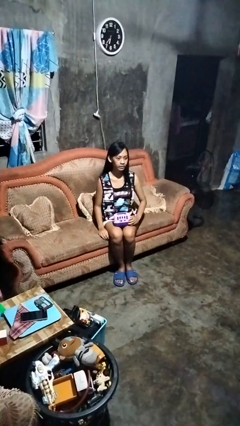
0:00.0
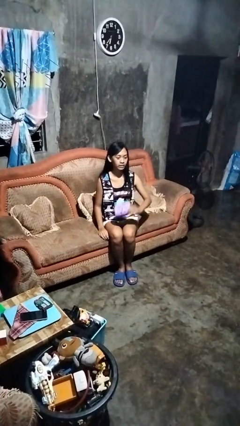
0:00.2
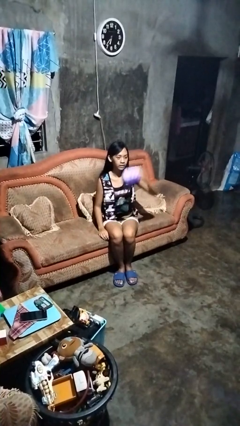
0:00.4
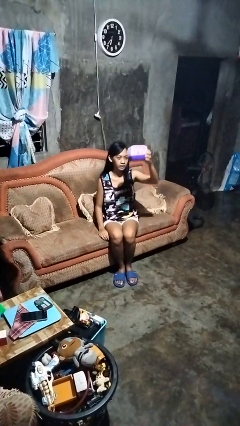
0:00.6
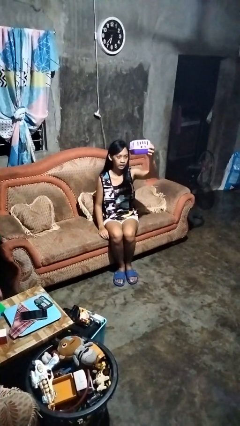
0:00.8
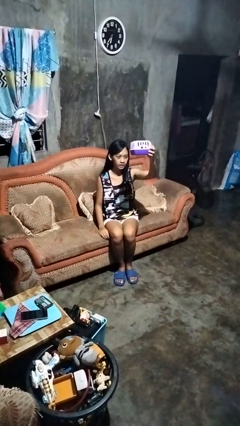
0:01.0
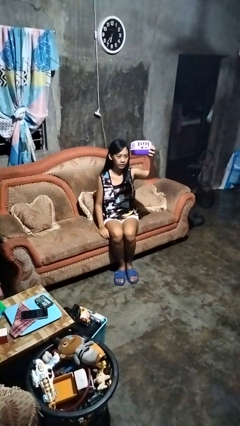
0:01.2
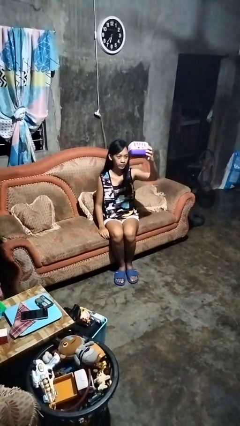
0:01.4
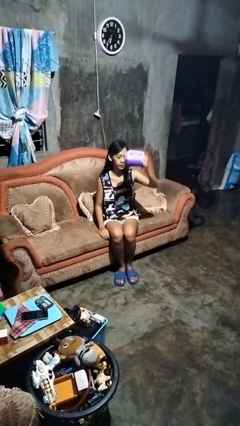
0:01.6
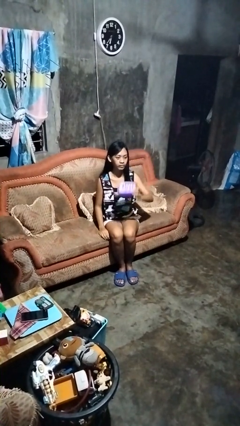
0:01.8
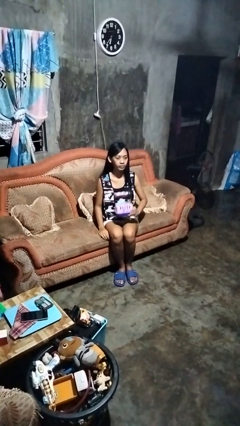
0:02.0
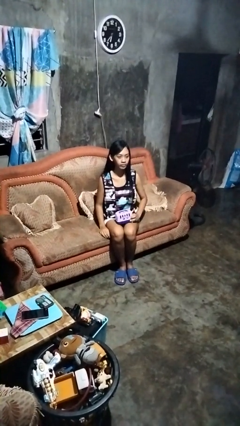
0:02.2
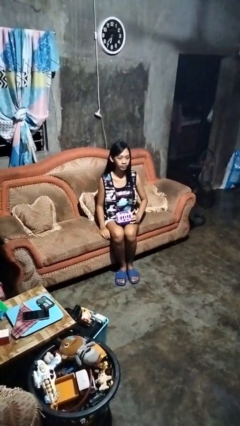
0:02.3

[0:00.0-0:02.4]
person holds object above head

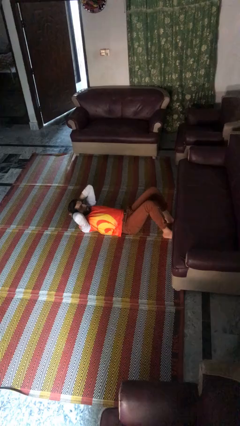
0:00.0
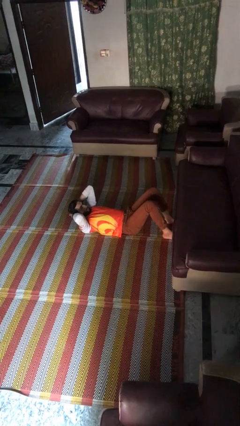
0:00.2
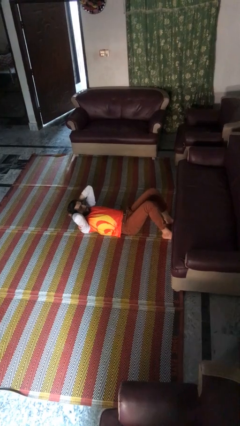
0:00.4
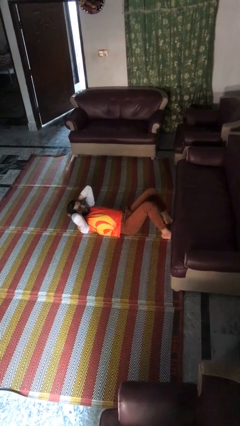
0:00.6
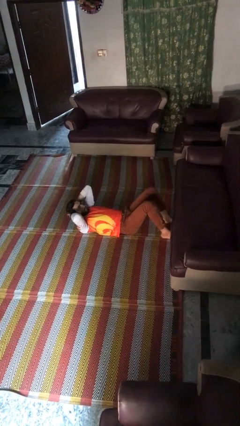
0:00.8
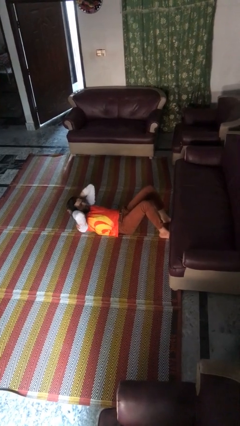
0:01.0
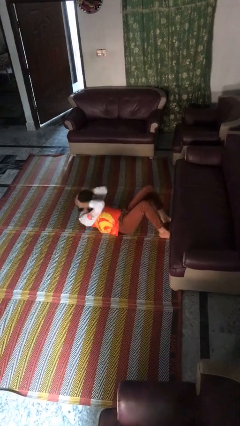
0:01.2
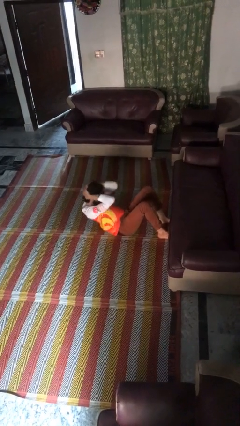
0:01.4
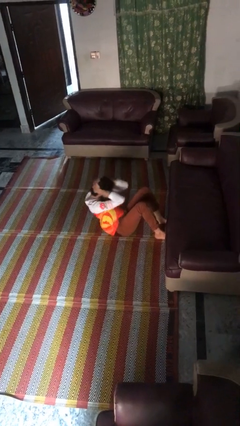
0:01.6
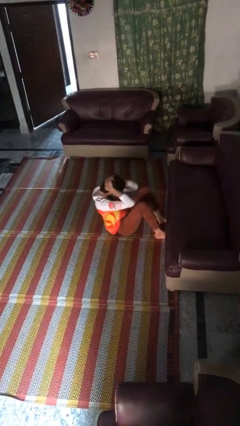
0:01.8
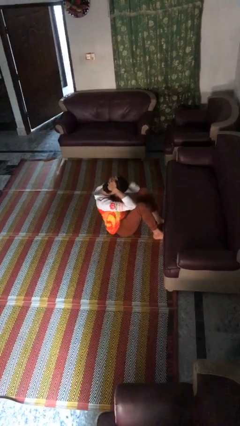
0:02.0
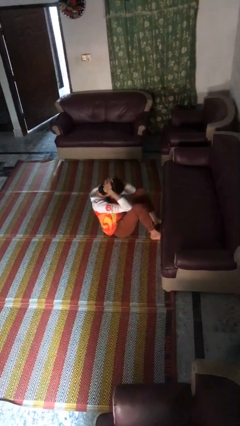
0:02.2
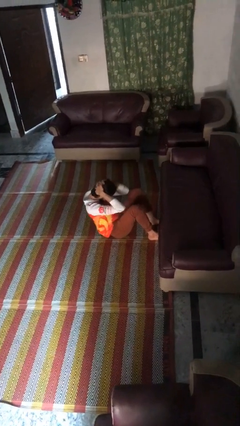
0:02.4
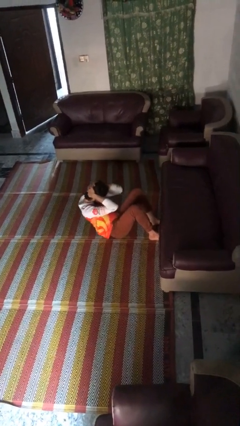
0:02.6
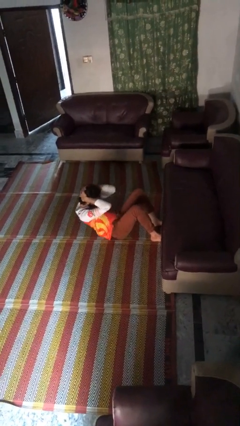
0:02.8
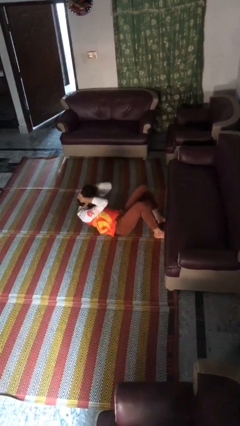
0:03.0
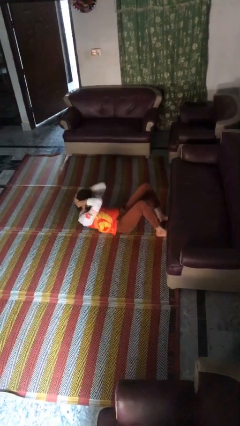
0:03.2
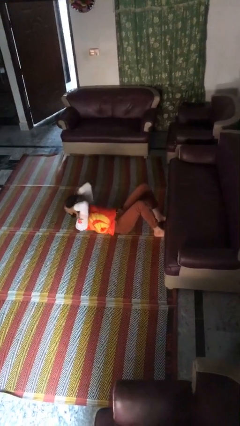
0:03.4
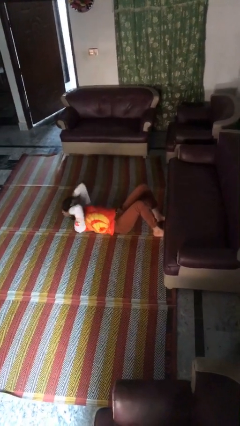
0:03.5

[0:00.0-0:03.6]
person exercises with situp

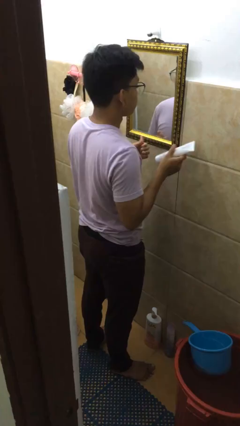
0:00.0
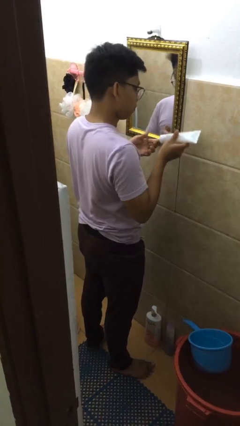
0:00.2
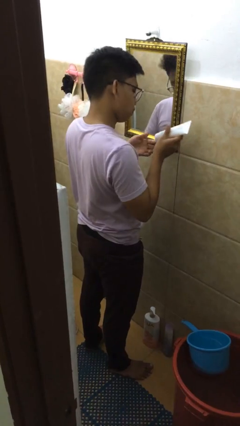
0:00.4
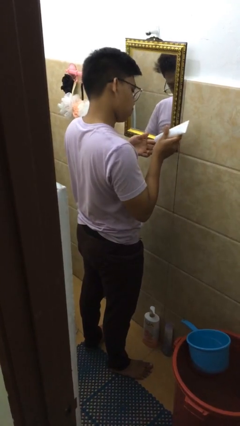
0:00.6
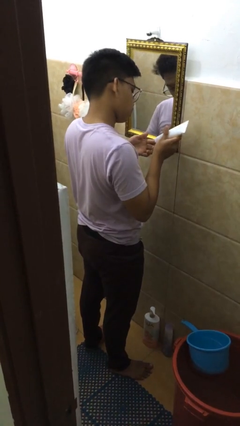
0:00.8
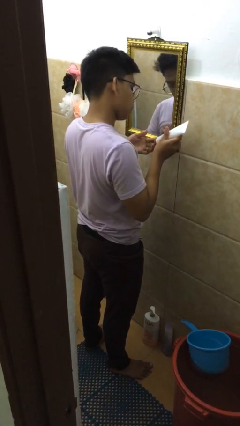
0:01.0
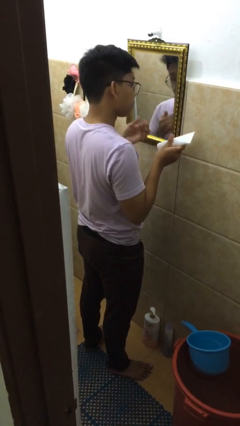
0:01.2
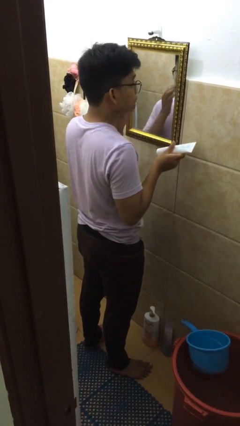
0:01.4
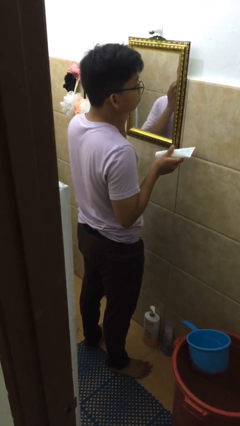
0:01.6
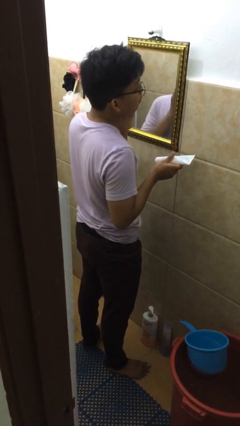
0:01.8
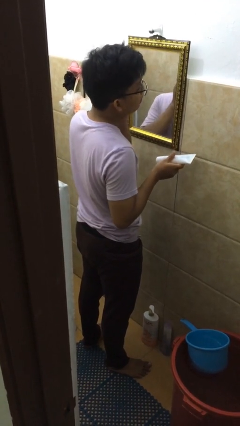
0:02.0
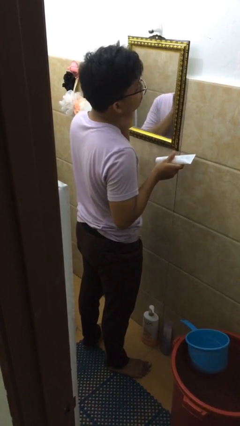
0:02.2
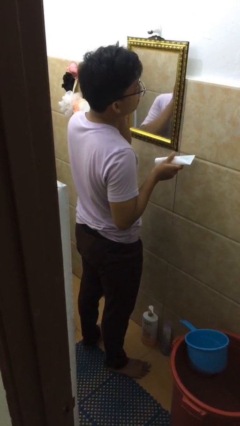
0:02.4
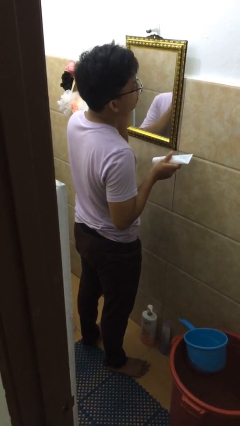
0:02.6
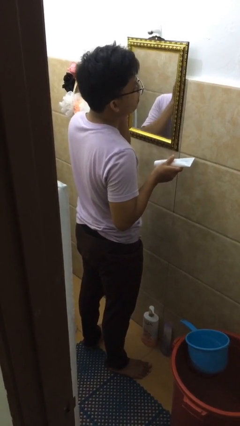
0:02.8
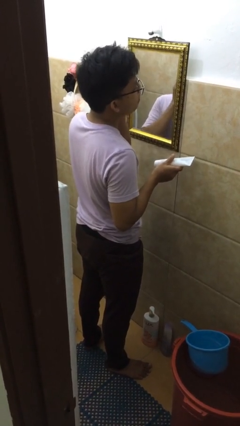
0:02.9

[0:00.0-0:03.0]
person applies facial moisturizer

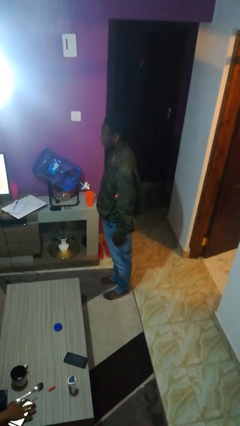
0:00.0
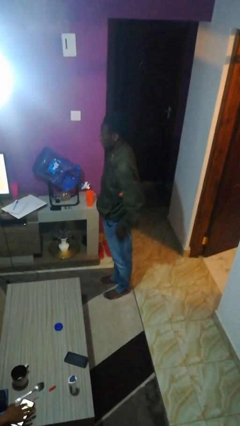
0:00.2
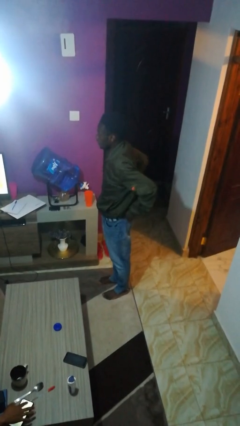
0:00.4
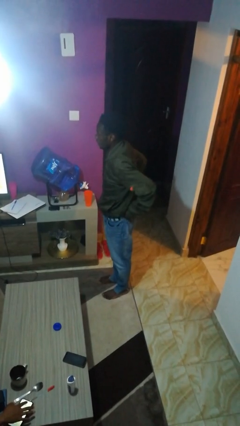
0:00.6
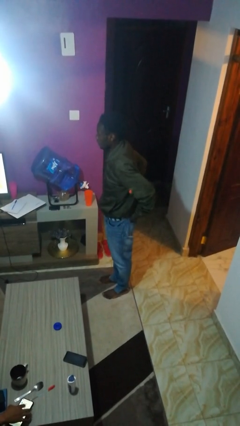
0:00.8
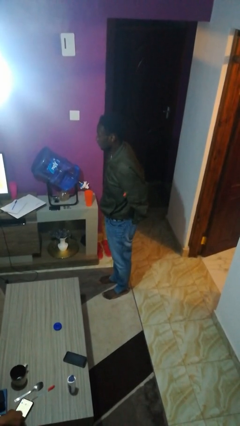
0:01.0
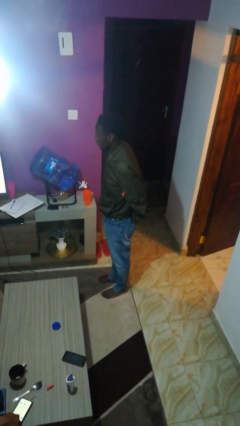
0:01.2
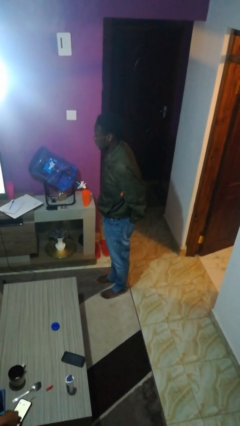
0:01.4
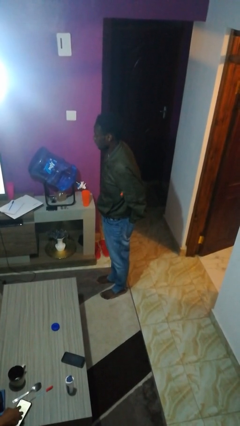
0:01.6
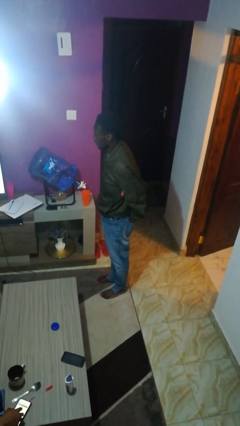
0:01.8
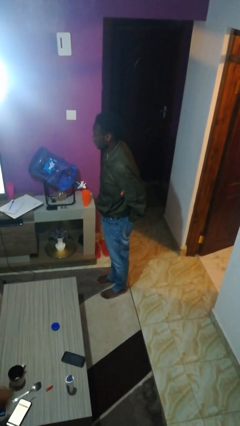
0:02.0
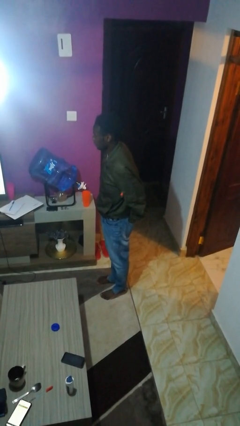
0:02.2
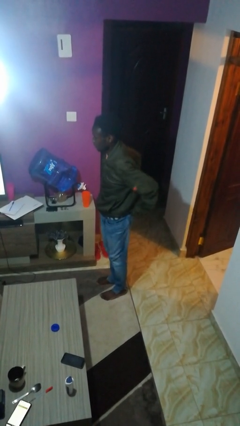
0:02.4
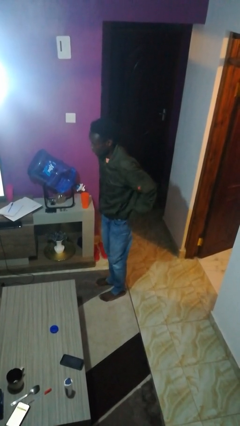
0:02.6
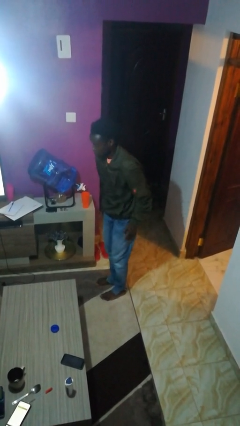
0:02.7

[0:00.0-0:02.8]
person puts hands in back pockets

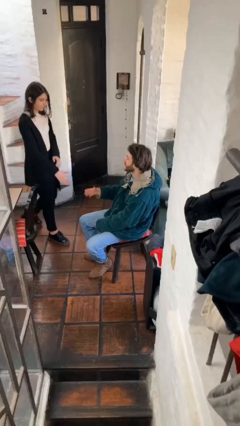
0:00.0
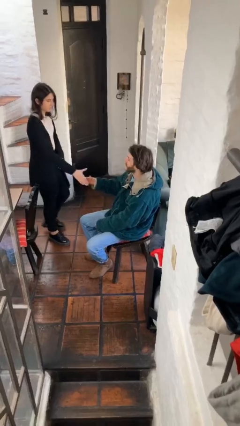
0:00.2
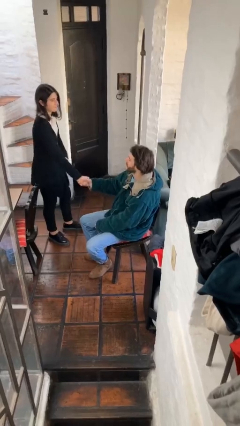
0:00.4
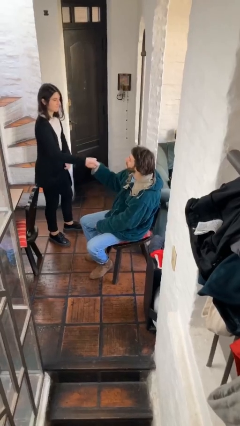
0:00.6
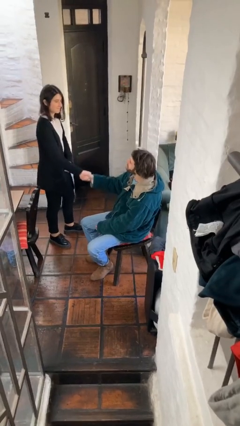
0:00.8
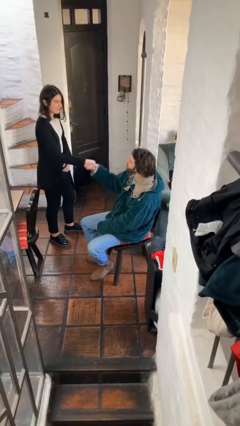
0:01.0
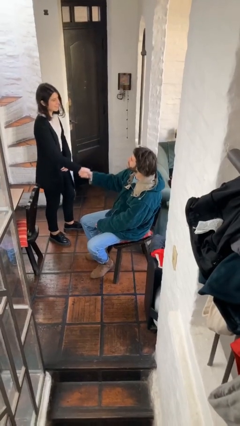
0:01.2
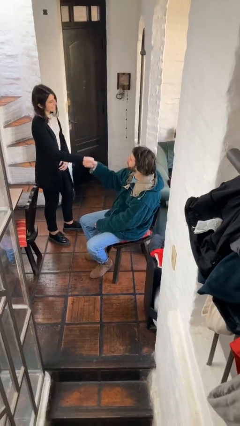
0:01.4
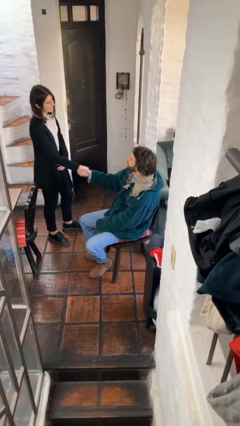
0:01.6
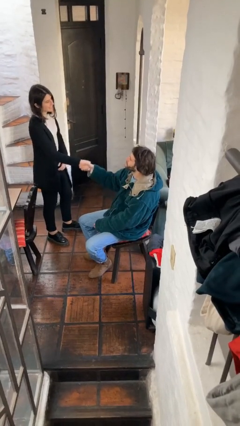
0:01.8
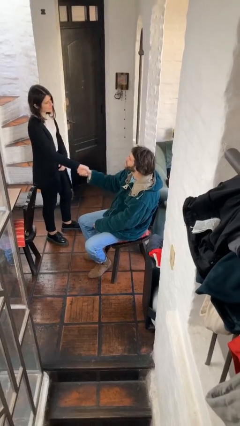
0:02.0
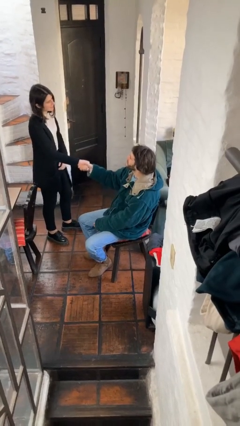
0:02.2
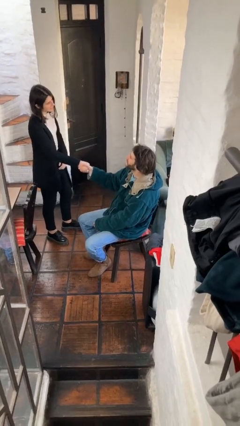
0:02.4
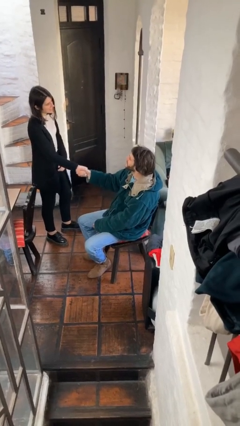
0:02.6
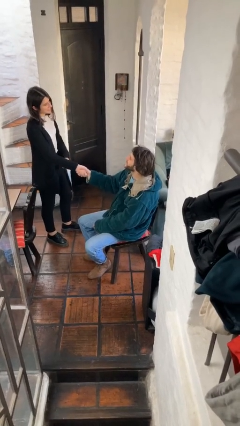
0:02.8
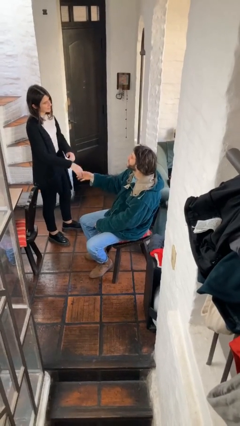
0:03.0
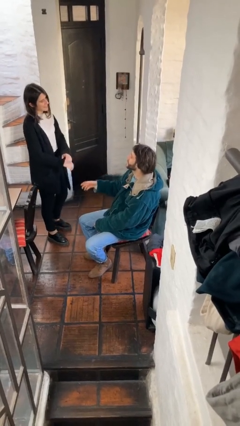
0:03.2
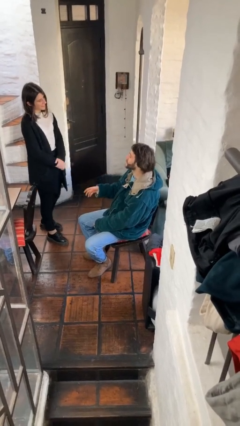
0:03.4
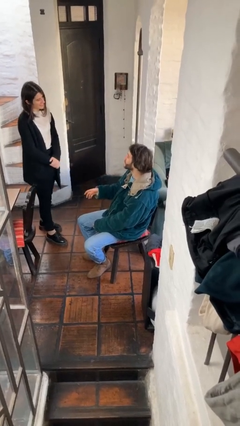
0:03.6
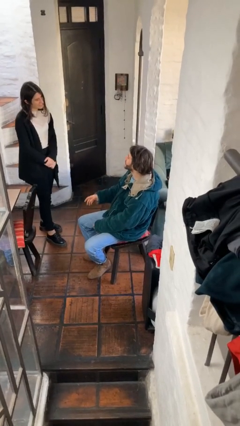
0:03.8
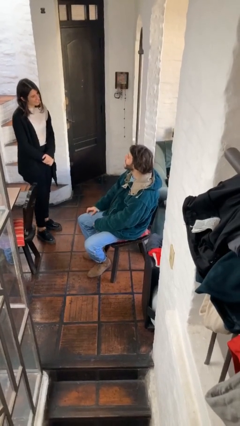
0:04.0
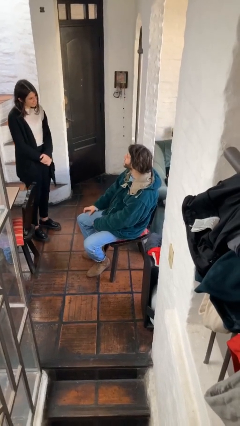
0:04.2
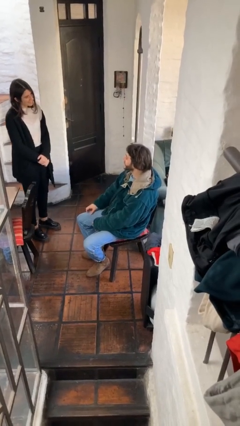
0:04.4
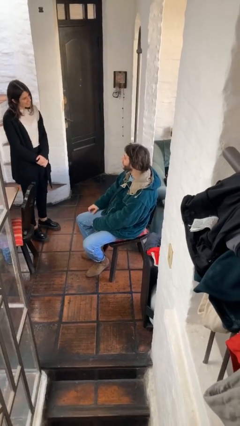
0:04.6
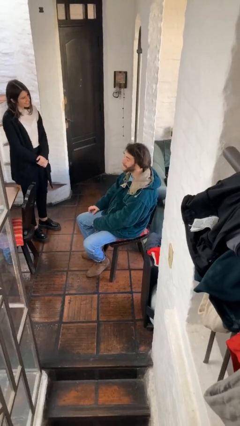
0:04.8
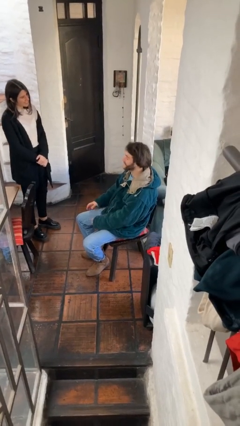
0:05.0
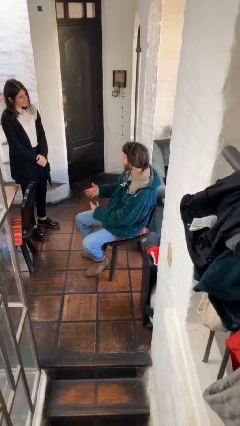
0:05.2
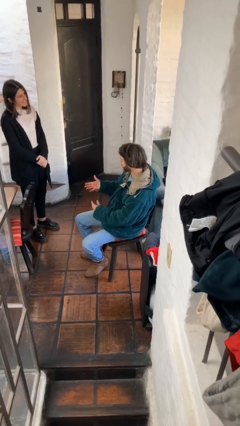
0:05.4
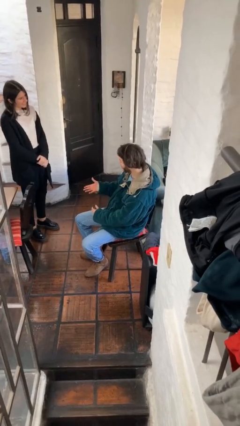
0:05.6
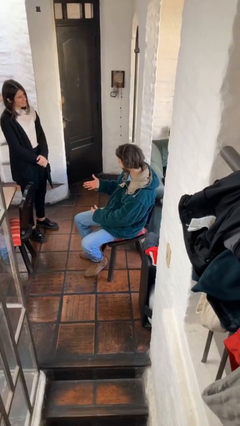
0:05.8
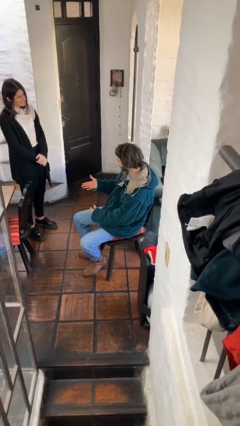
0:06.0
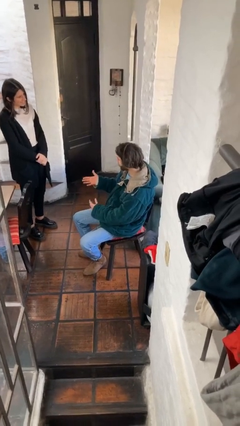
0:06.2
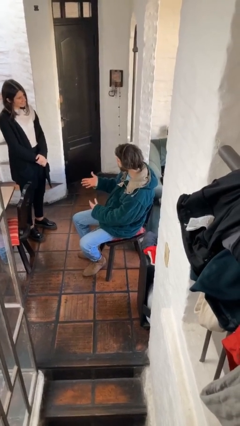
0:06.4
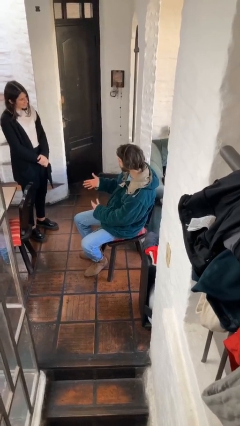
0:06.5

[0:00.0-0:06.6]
person shakes hand
